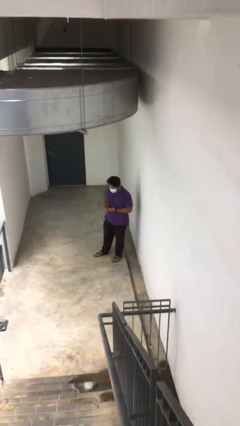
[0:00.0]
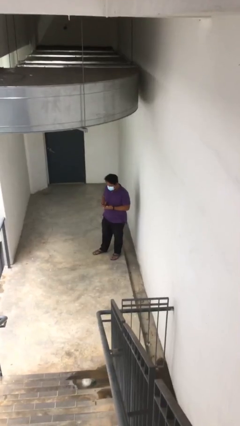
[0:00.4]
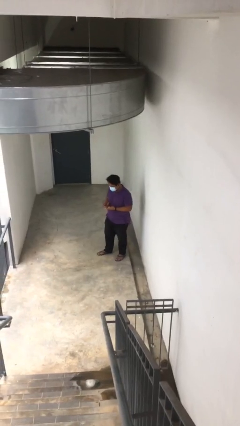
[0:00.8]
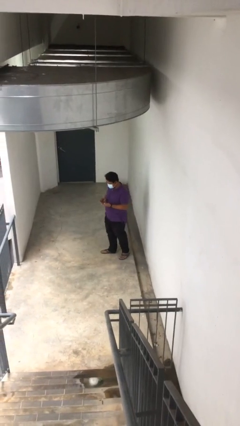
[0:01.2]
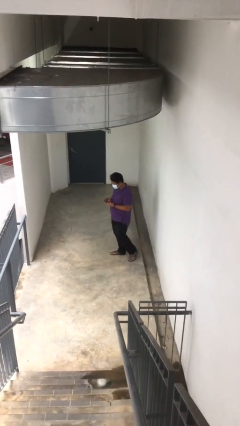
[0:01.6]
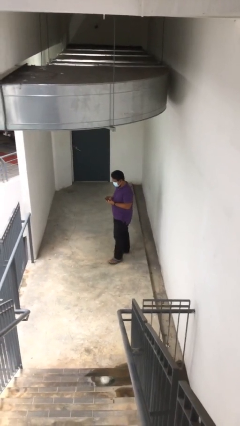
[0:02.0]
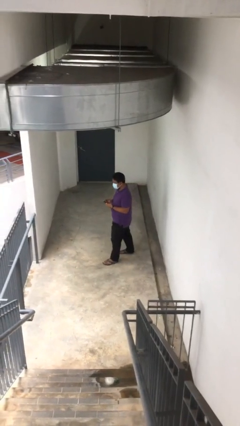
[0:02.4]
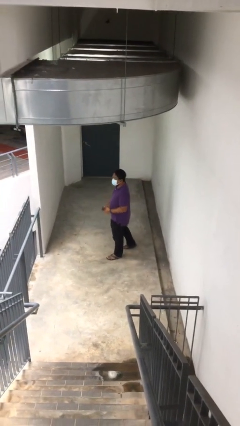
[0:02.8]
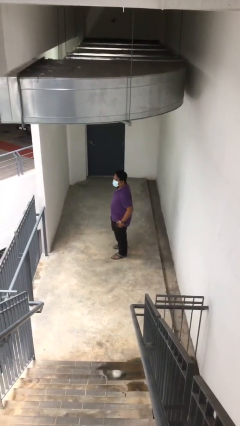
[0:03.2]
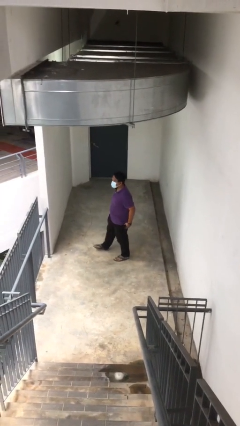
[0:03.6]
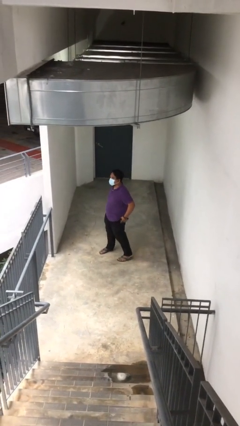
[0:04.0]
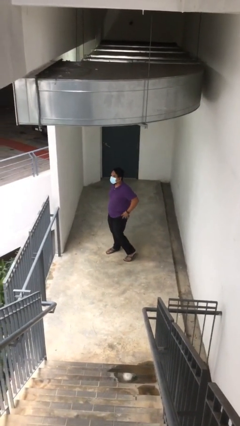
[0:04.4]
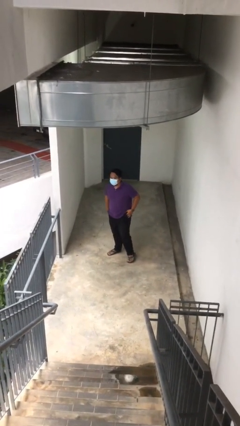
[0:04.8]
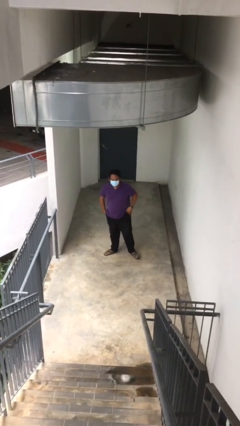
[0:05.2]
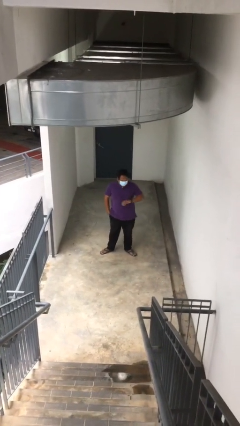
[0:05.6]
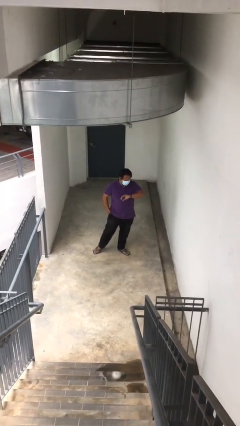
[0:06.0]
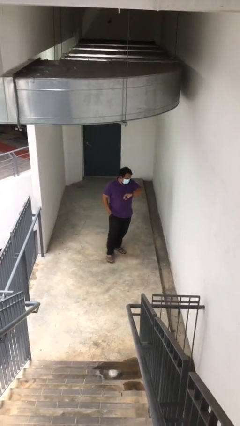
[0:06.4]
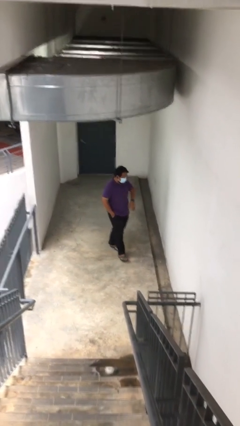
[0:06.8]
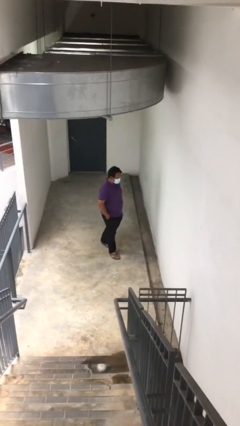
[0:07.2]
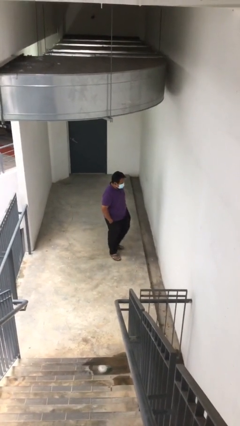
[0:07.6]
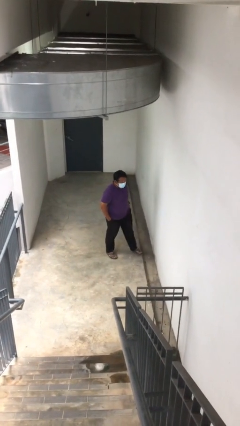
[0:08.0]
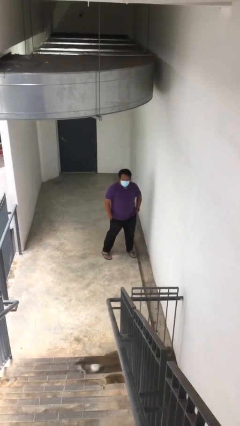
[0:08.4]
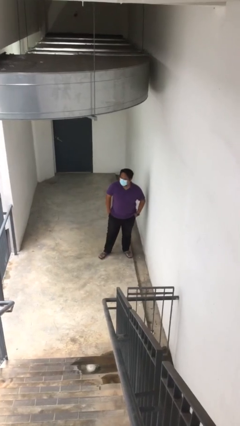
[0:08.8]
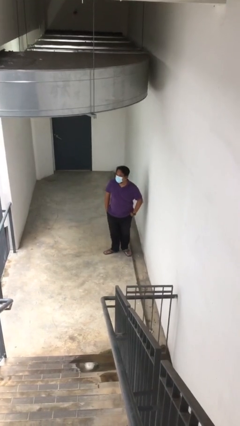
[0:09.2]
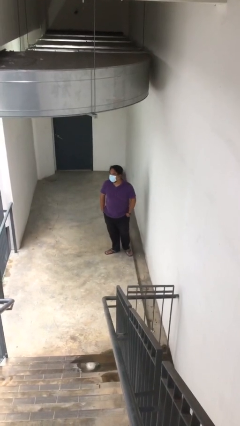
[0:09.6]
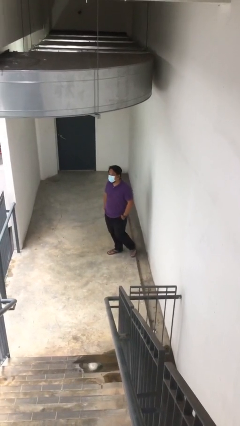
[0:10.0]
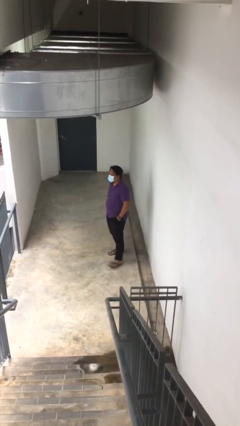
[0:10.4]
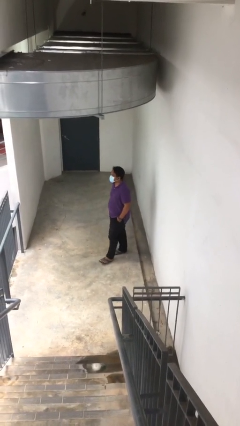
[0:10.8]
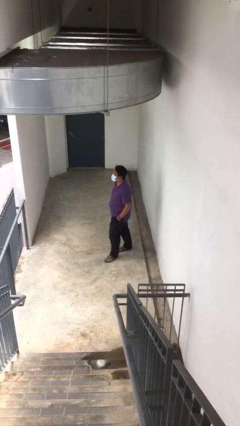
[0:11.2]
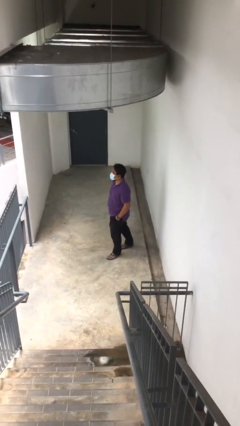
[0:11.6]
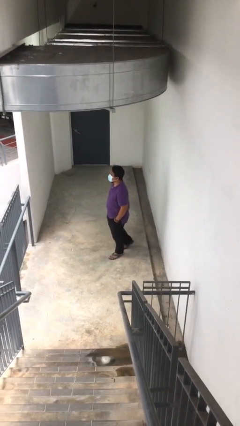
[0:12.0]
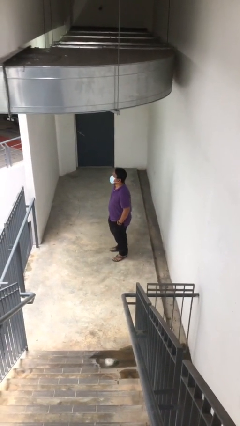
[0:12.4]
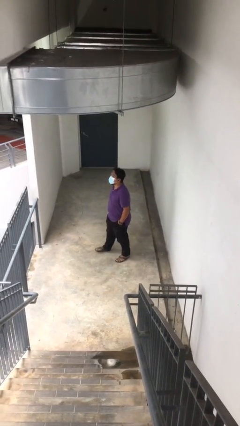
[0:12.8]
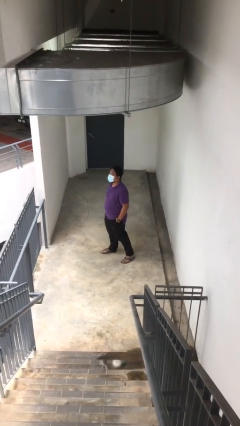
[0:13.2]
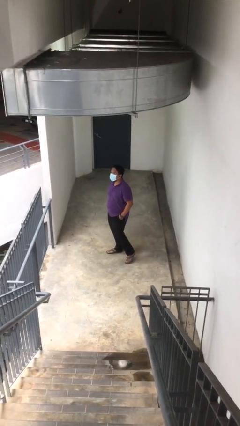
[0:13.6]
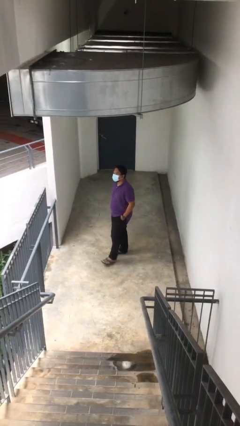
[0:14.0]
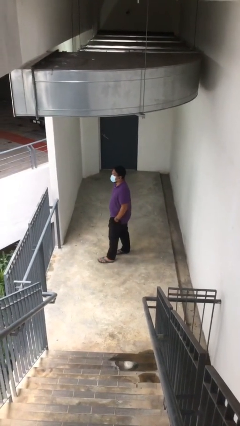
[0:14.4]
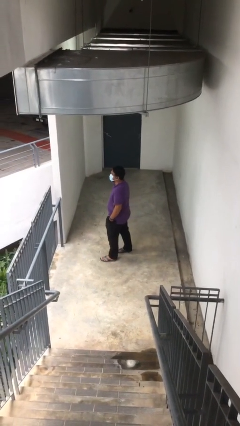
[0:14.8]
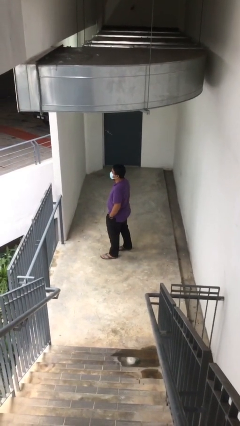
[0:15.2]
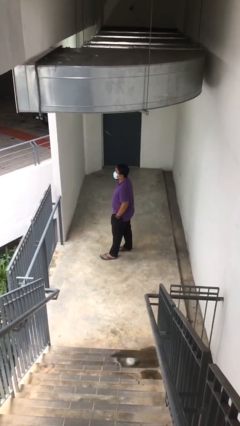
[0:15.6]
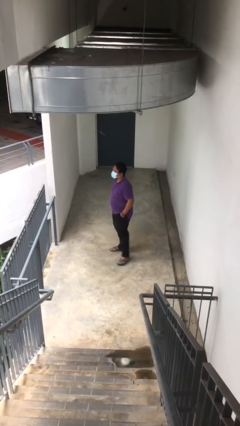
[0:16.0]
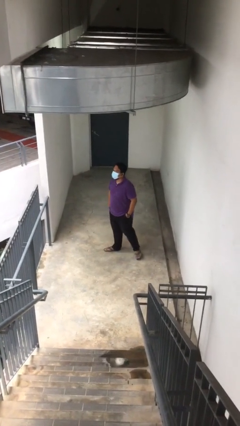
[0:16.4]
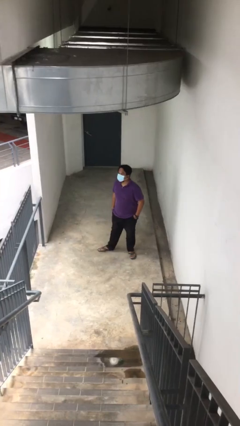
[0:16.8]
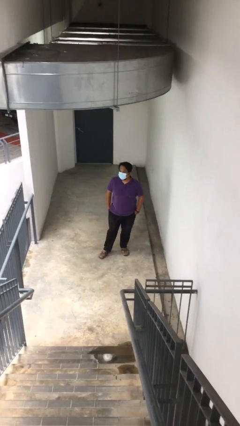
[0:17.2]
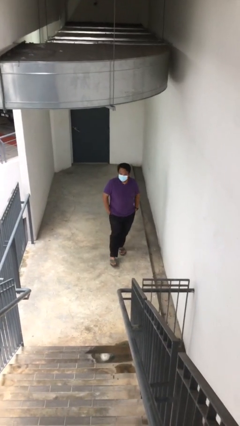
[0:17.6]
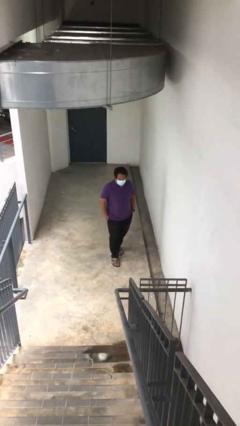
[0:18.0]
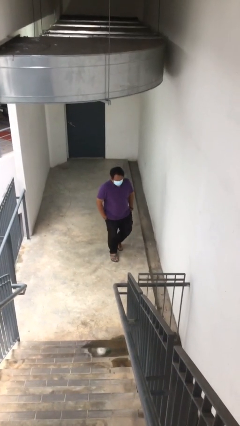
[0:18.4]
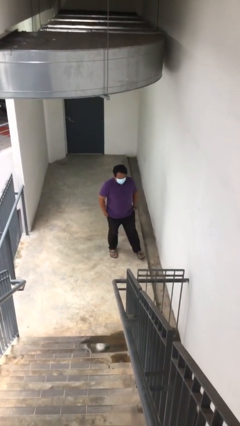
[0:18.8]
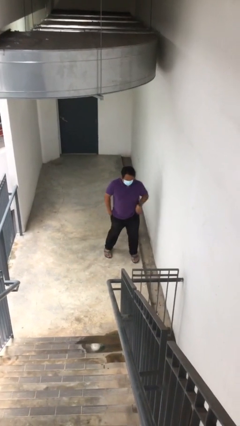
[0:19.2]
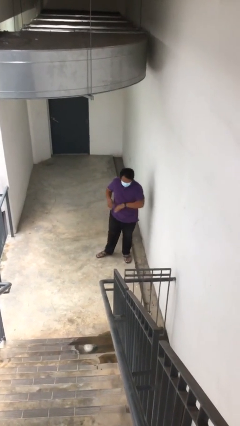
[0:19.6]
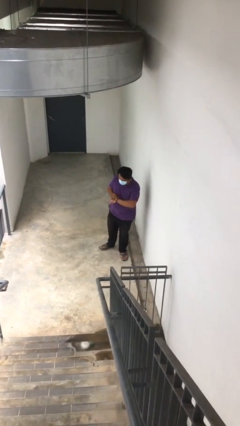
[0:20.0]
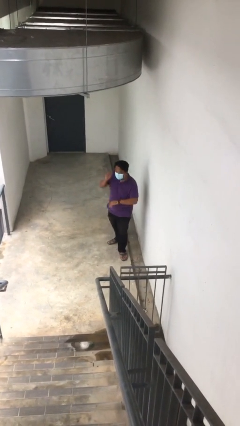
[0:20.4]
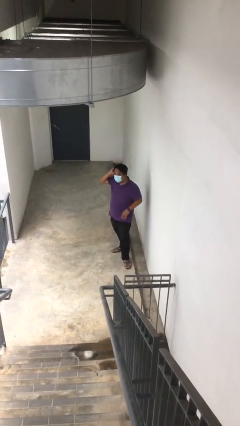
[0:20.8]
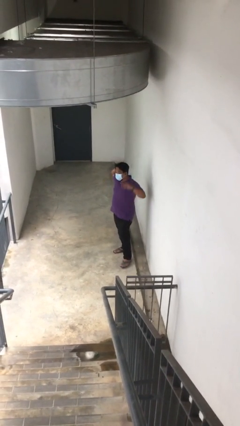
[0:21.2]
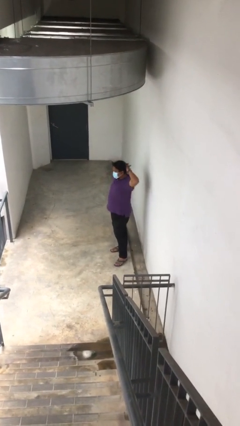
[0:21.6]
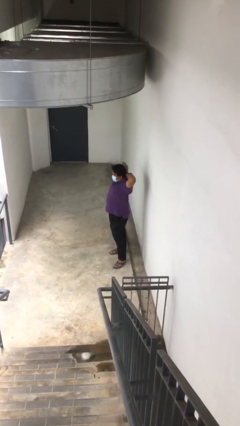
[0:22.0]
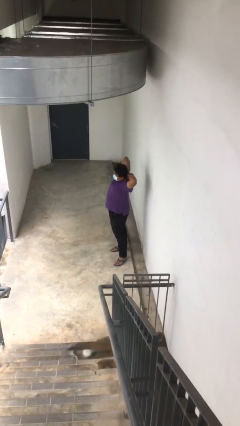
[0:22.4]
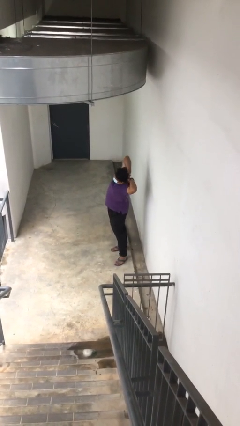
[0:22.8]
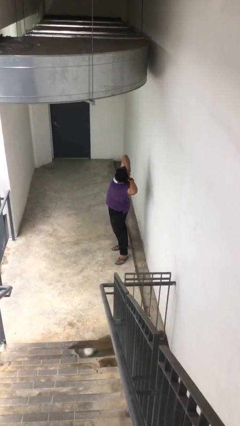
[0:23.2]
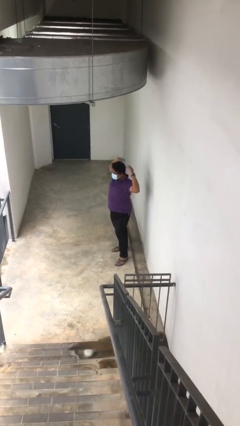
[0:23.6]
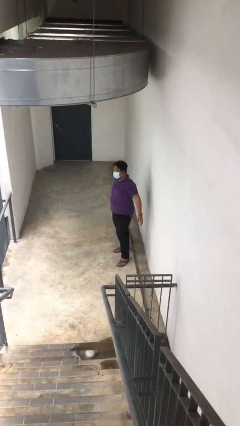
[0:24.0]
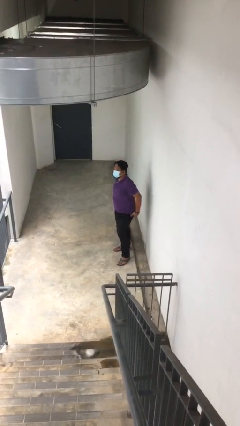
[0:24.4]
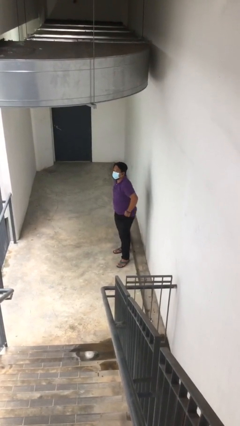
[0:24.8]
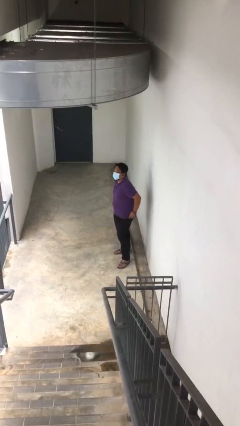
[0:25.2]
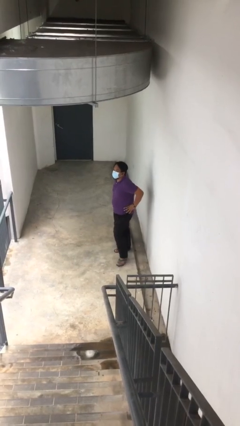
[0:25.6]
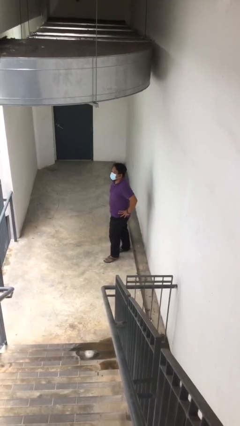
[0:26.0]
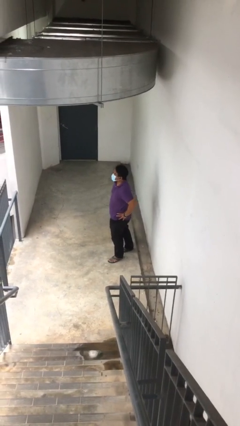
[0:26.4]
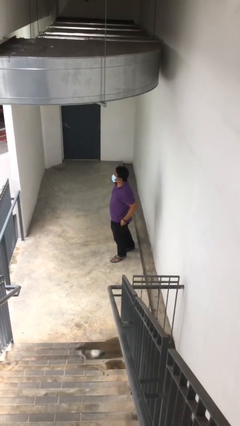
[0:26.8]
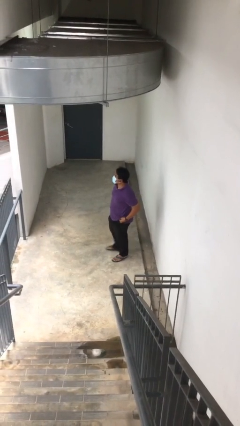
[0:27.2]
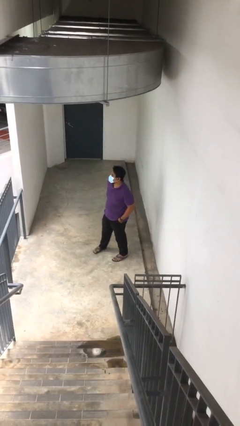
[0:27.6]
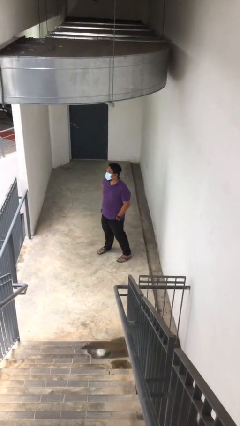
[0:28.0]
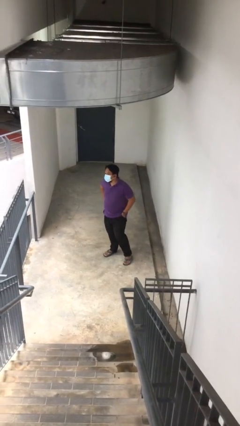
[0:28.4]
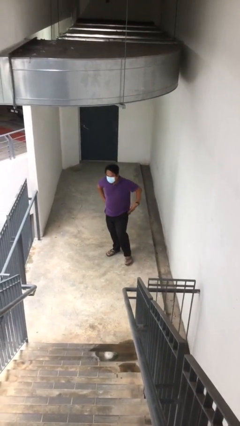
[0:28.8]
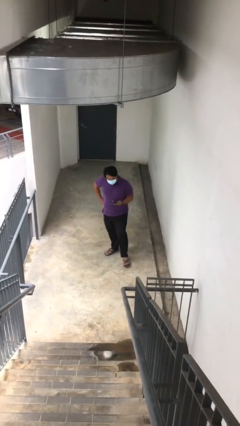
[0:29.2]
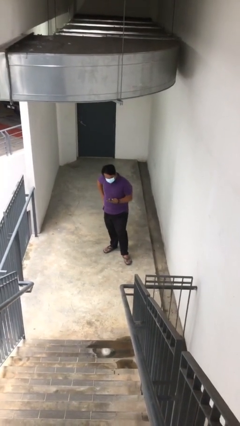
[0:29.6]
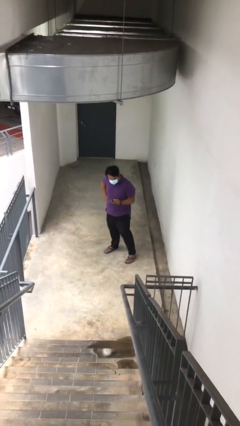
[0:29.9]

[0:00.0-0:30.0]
person walks

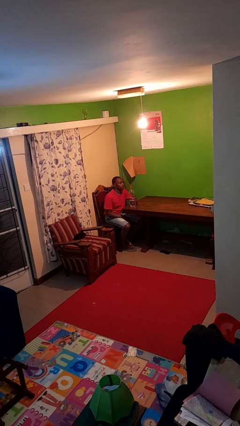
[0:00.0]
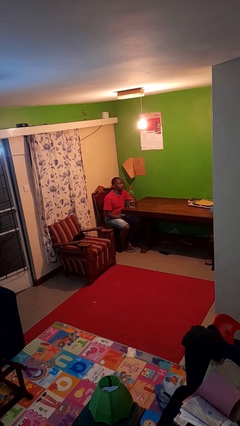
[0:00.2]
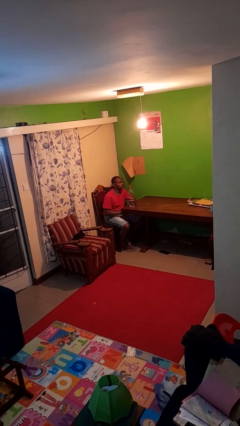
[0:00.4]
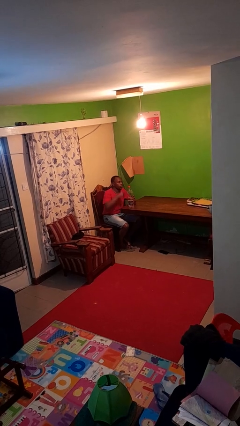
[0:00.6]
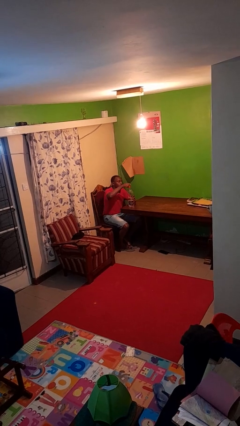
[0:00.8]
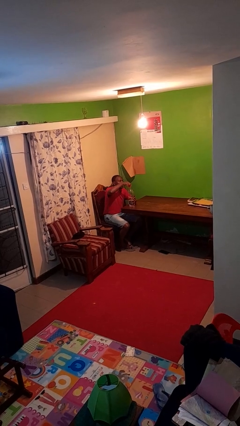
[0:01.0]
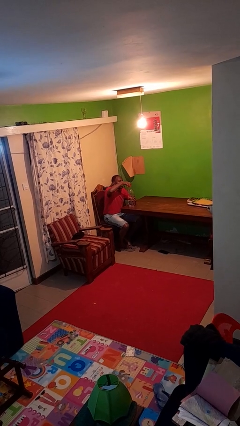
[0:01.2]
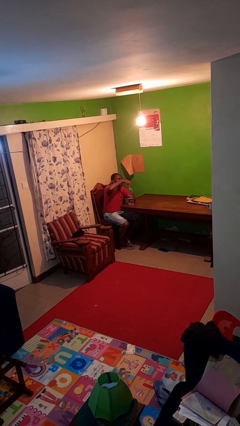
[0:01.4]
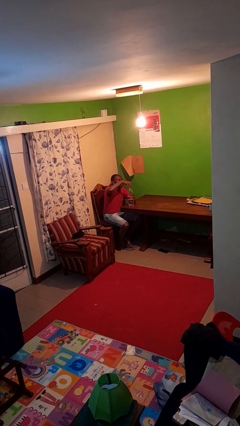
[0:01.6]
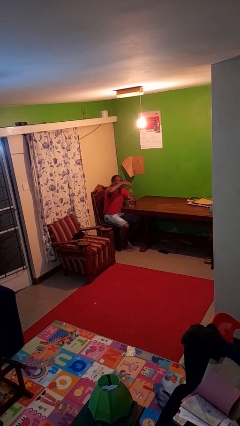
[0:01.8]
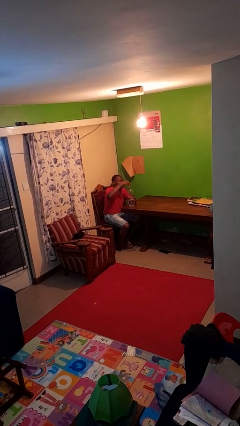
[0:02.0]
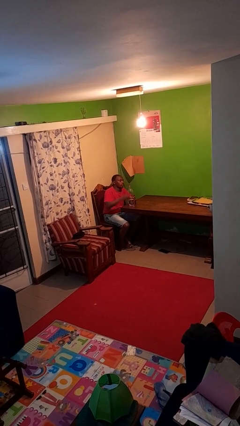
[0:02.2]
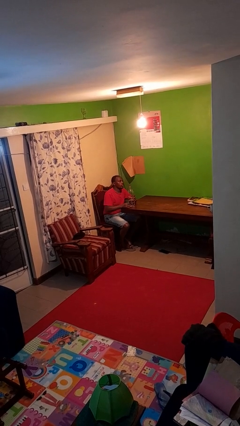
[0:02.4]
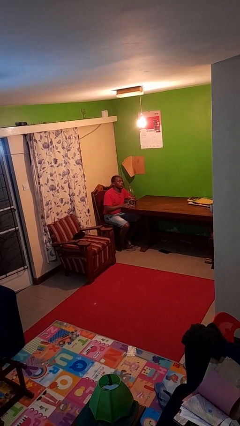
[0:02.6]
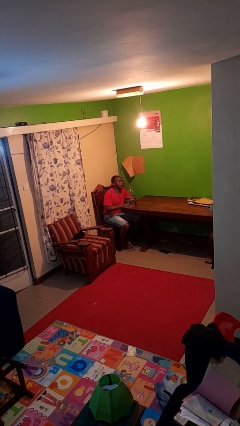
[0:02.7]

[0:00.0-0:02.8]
person unscrews lid from bottle
